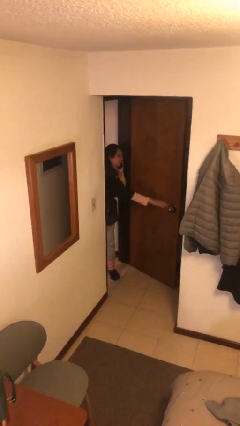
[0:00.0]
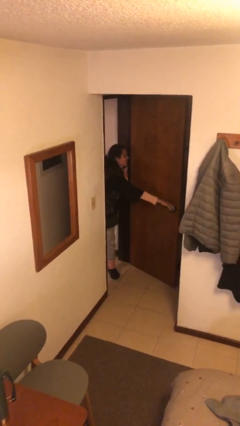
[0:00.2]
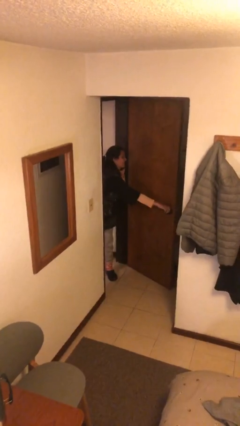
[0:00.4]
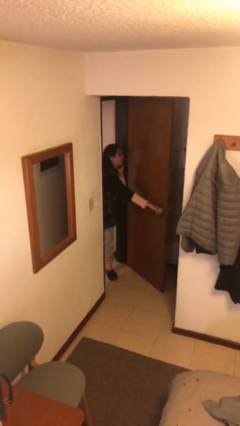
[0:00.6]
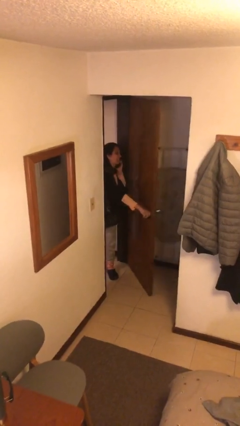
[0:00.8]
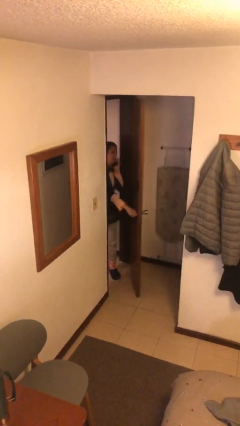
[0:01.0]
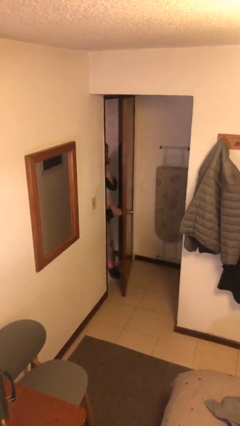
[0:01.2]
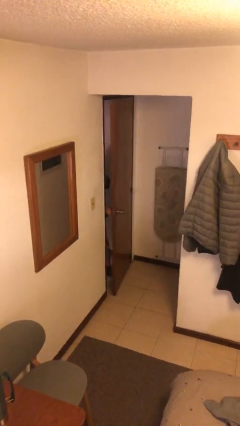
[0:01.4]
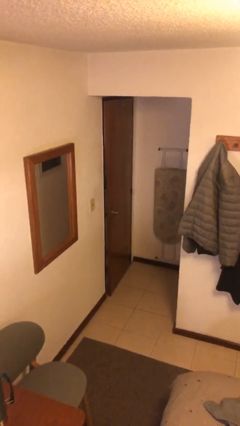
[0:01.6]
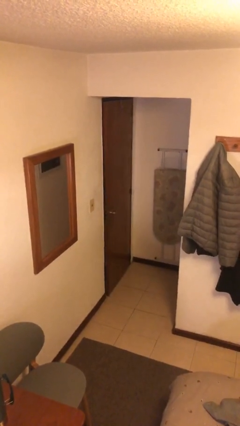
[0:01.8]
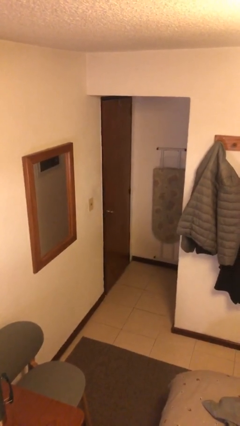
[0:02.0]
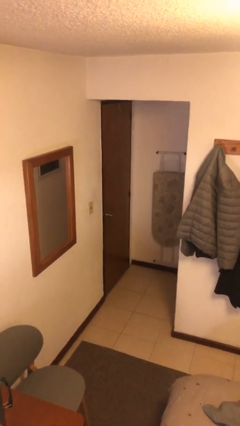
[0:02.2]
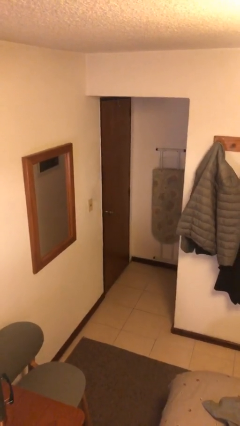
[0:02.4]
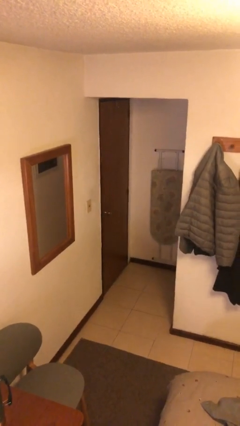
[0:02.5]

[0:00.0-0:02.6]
person closes facility door

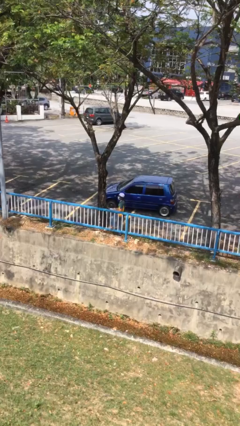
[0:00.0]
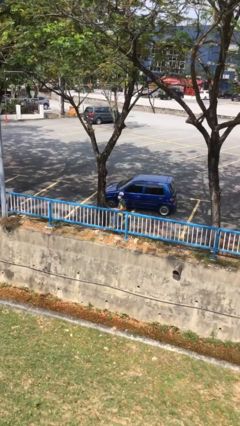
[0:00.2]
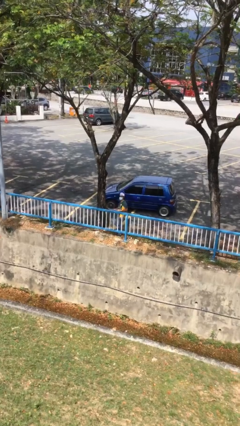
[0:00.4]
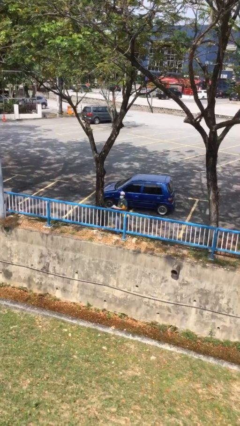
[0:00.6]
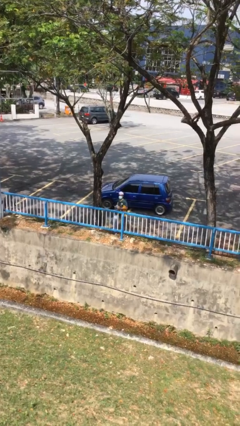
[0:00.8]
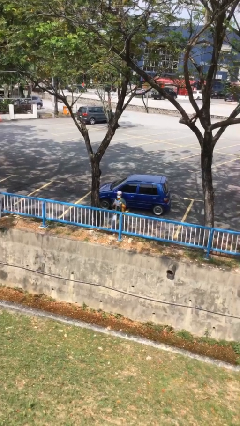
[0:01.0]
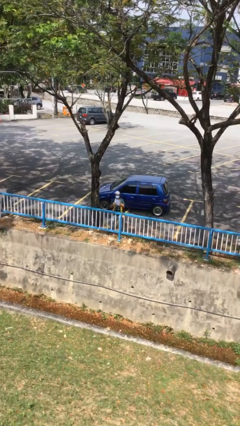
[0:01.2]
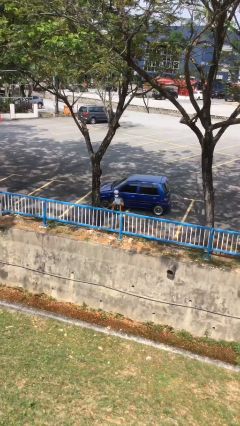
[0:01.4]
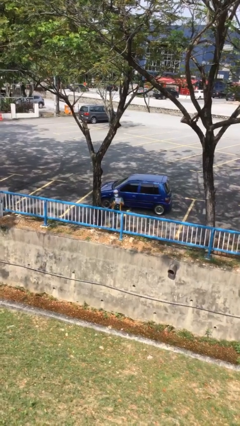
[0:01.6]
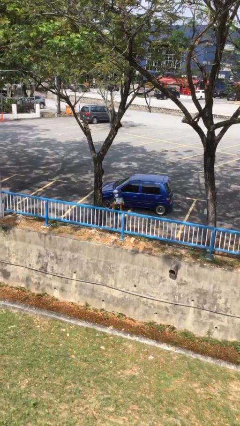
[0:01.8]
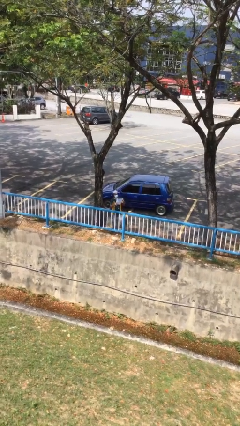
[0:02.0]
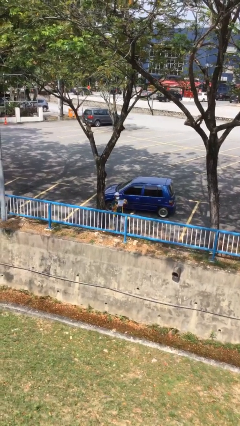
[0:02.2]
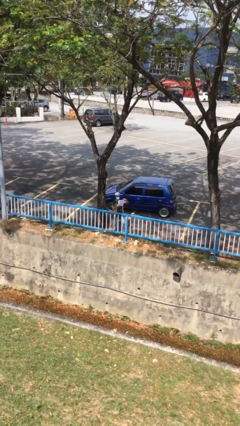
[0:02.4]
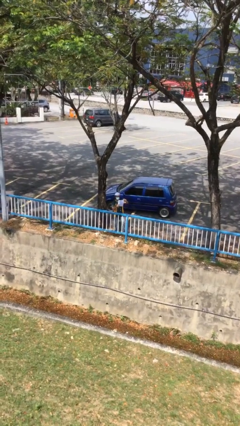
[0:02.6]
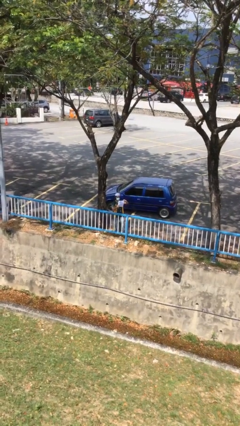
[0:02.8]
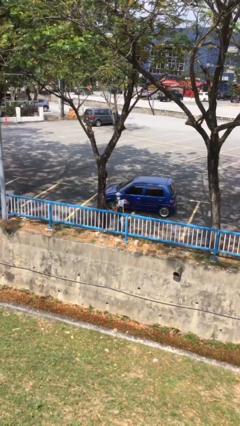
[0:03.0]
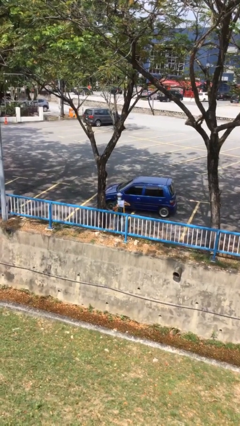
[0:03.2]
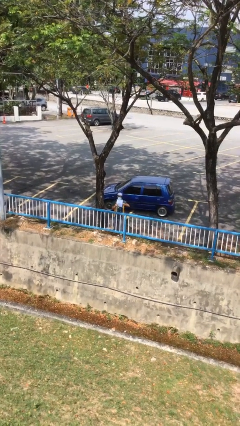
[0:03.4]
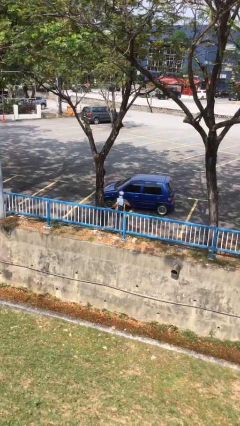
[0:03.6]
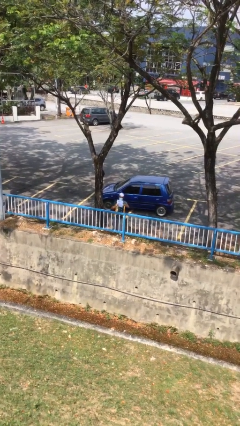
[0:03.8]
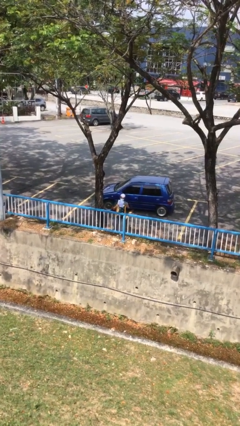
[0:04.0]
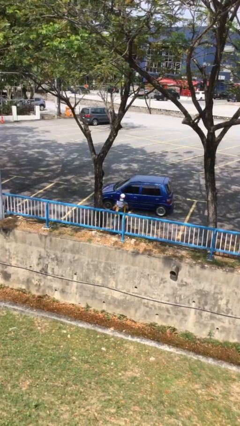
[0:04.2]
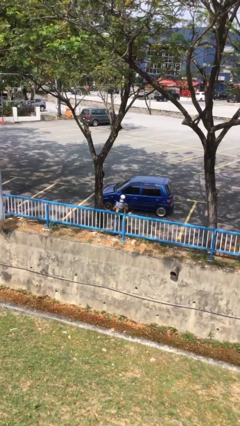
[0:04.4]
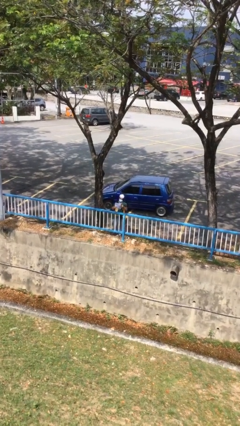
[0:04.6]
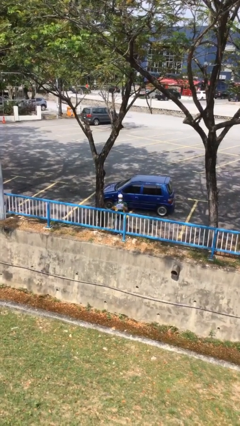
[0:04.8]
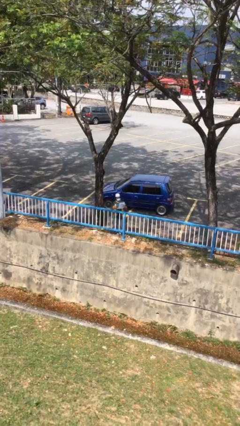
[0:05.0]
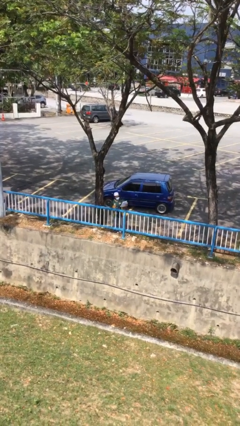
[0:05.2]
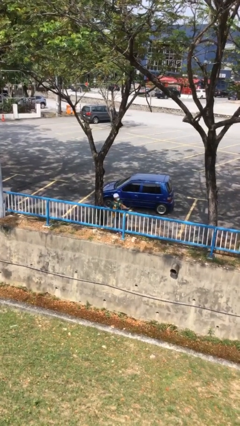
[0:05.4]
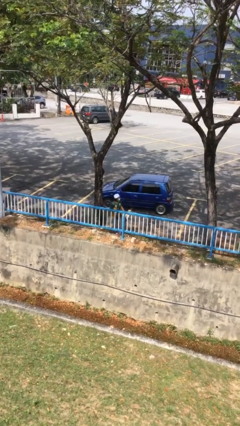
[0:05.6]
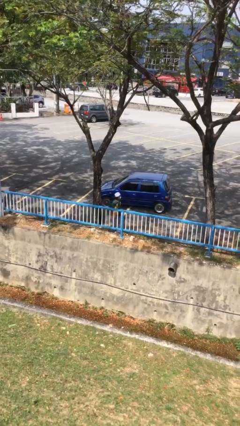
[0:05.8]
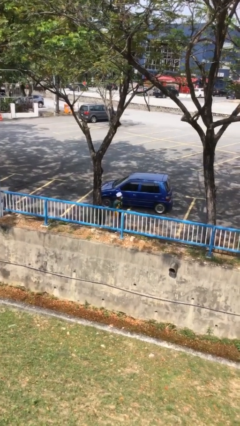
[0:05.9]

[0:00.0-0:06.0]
person reads document

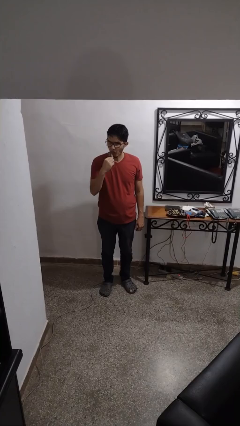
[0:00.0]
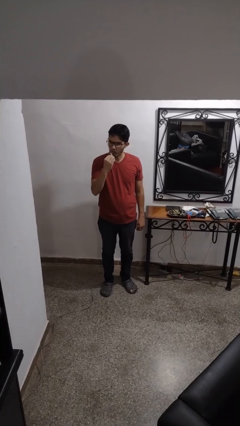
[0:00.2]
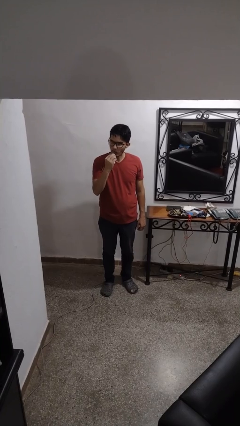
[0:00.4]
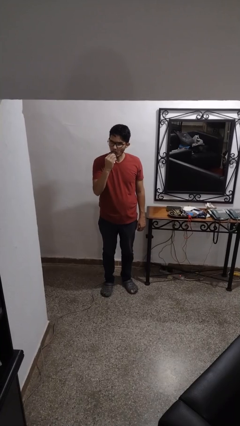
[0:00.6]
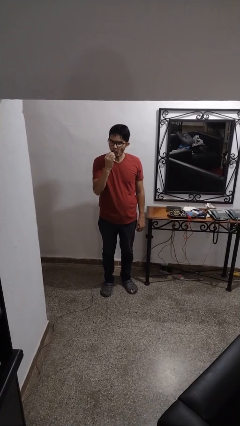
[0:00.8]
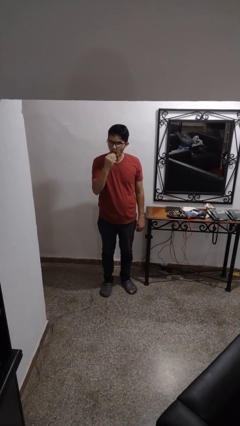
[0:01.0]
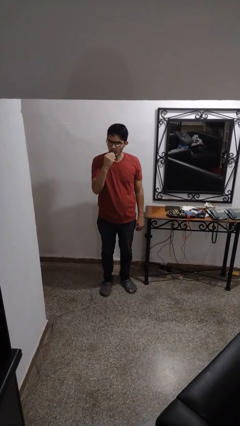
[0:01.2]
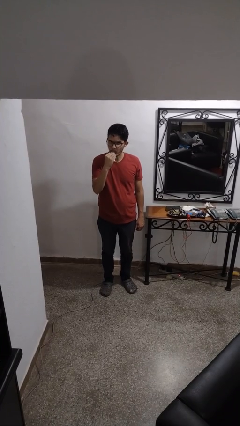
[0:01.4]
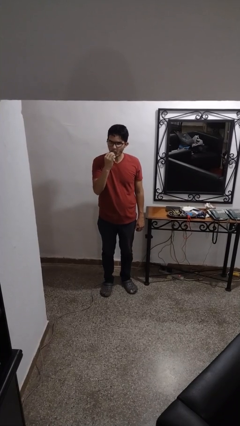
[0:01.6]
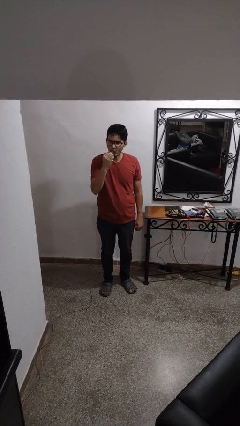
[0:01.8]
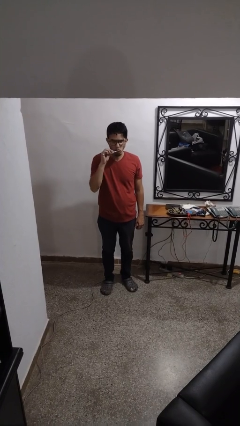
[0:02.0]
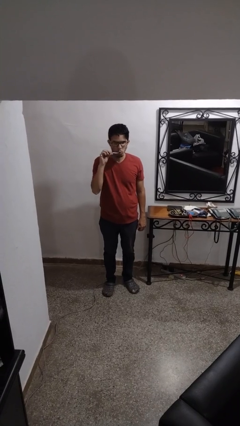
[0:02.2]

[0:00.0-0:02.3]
person brushes teeth

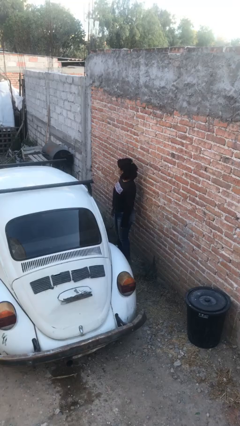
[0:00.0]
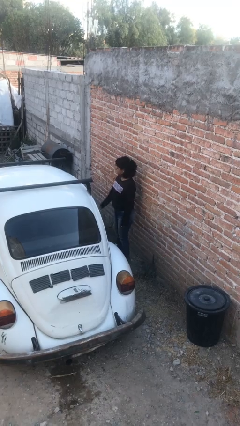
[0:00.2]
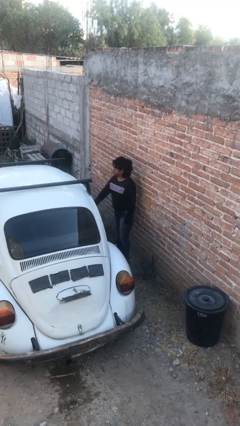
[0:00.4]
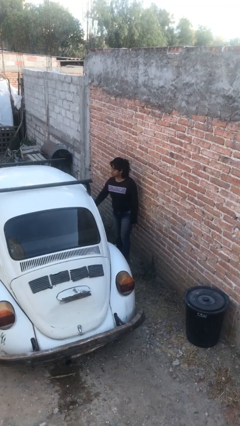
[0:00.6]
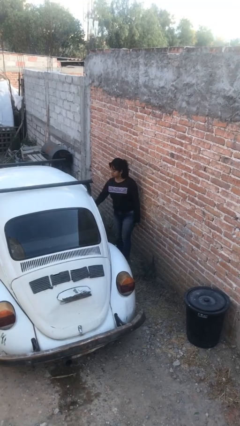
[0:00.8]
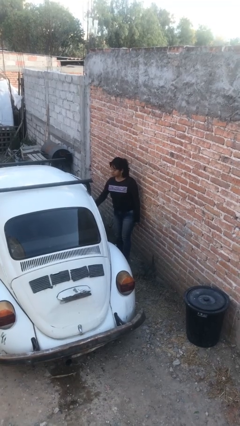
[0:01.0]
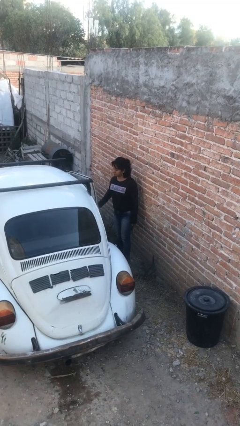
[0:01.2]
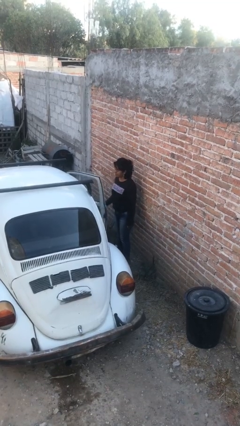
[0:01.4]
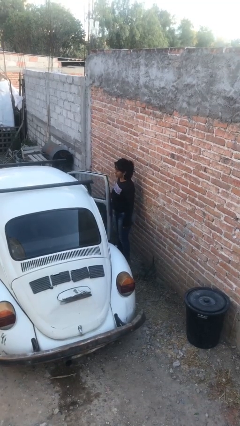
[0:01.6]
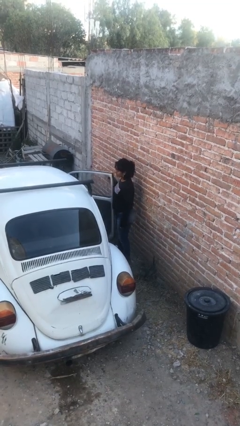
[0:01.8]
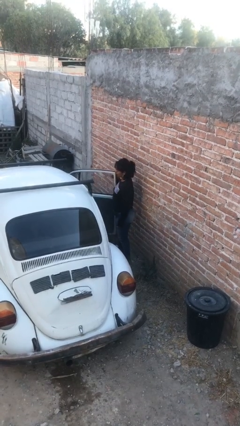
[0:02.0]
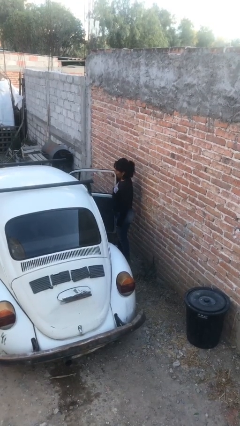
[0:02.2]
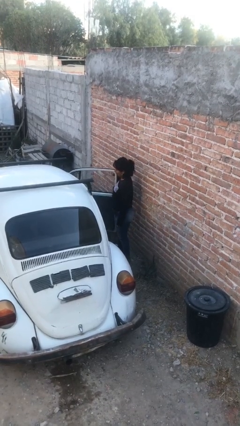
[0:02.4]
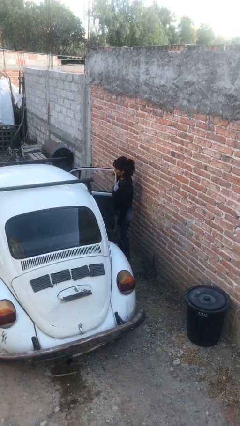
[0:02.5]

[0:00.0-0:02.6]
person opens car door

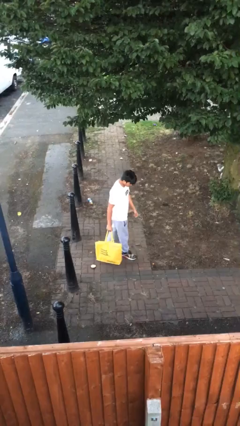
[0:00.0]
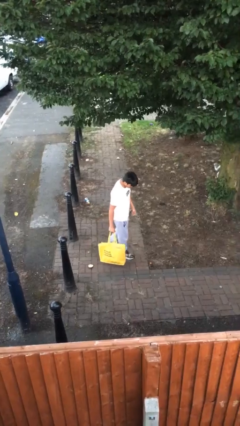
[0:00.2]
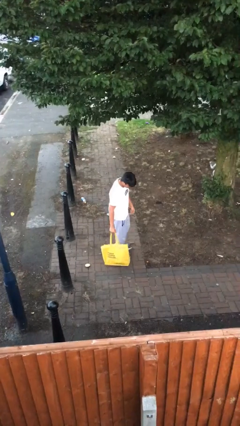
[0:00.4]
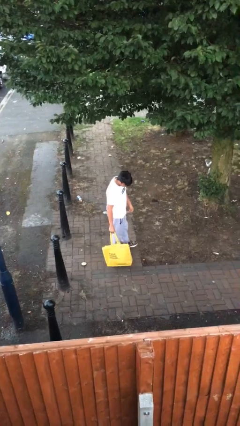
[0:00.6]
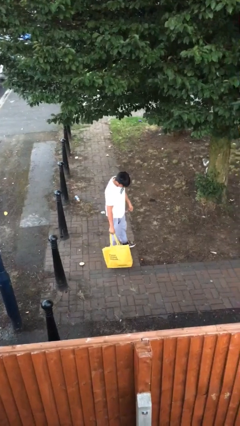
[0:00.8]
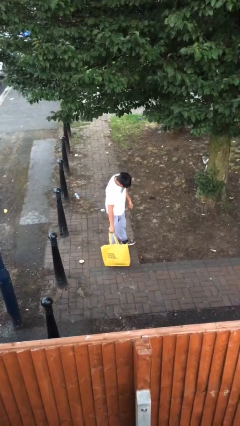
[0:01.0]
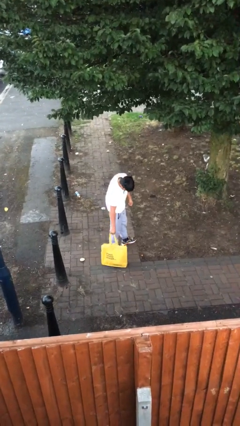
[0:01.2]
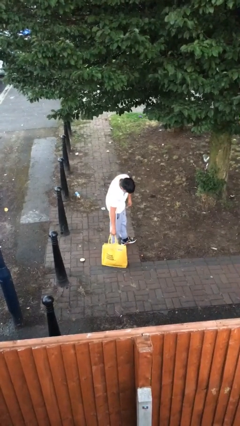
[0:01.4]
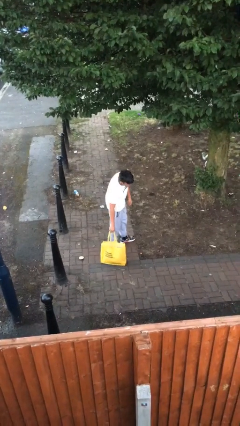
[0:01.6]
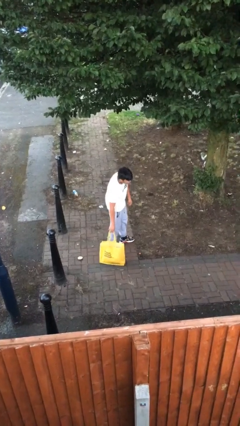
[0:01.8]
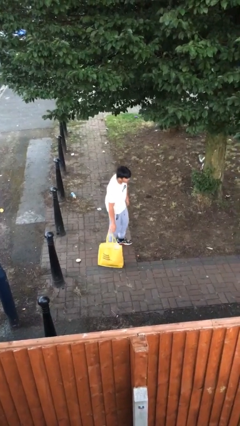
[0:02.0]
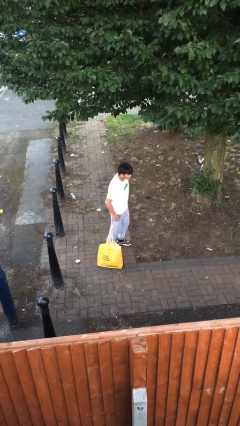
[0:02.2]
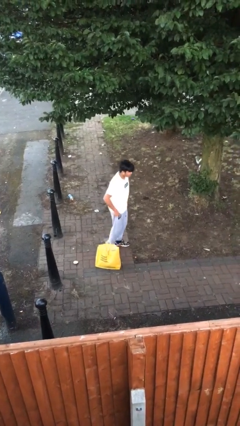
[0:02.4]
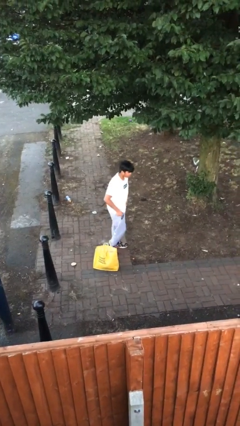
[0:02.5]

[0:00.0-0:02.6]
person puts down object on floor

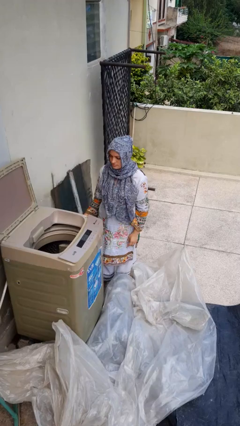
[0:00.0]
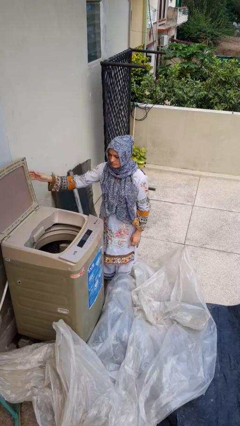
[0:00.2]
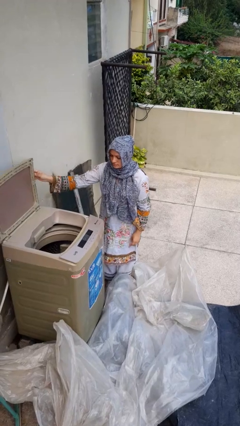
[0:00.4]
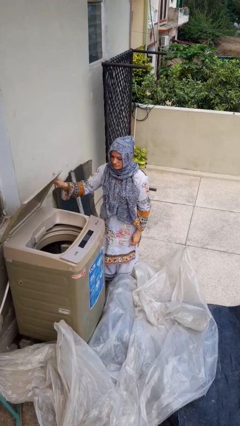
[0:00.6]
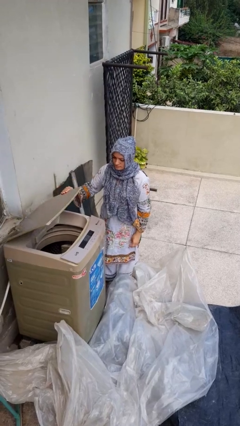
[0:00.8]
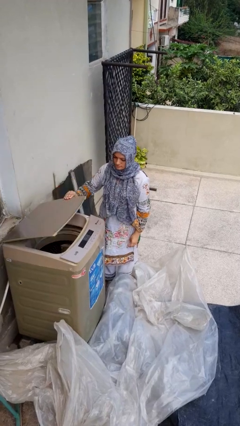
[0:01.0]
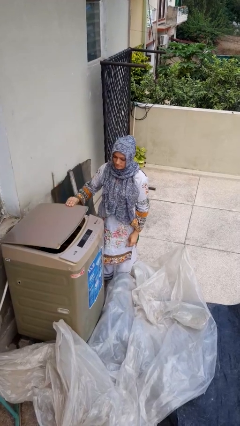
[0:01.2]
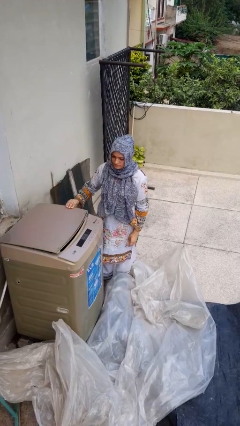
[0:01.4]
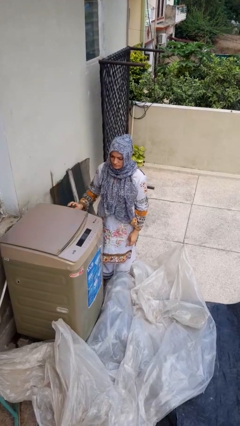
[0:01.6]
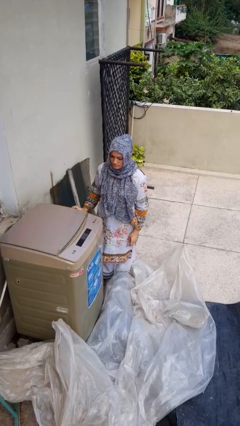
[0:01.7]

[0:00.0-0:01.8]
person closes clothes washer
